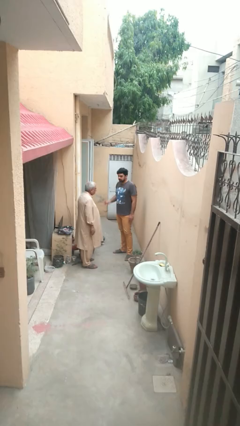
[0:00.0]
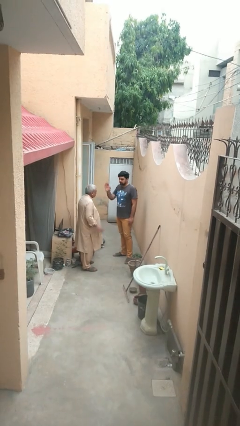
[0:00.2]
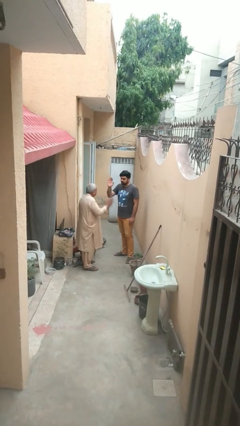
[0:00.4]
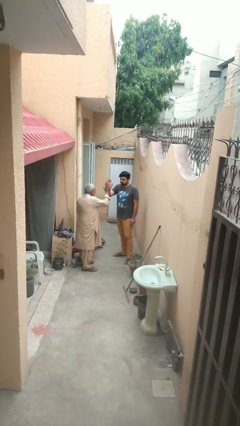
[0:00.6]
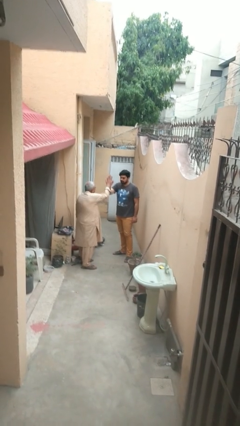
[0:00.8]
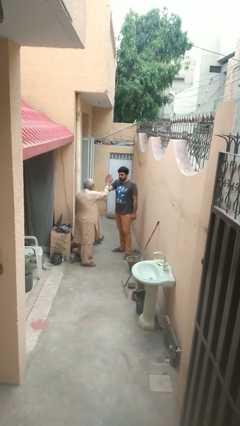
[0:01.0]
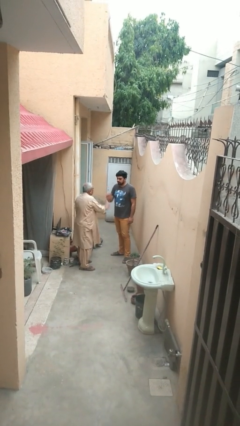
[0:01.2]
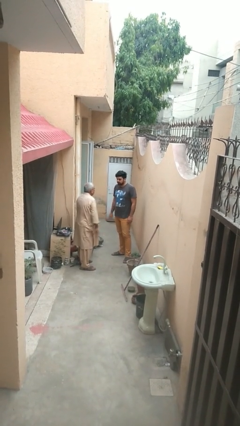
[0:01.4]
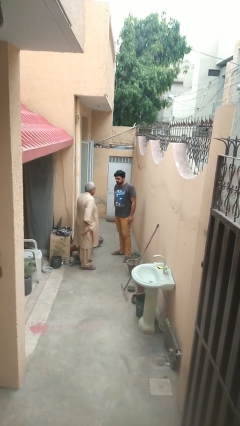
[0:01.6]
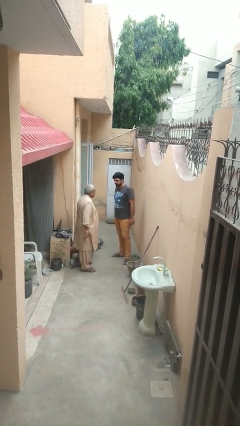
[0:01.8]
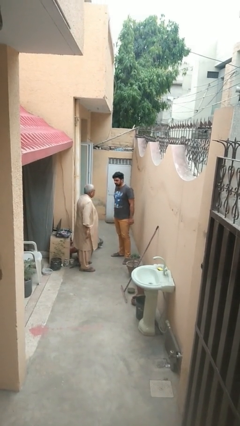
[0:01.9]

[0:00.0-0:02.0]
person highfives hand

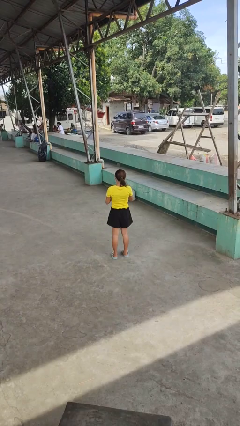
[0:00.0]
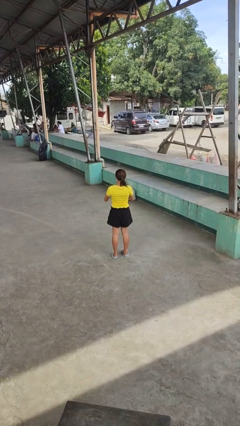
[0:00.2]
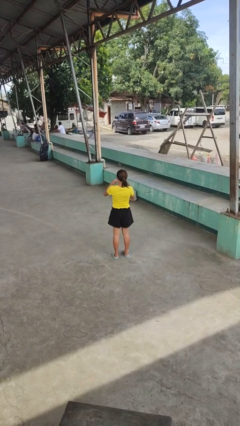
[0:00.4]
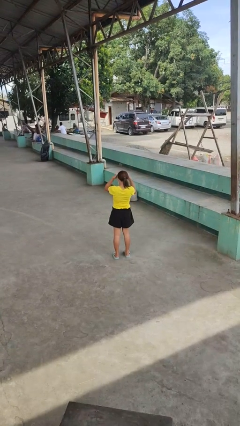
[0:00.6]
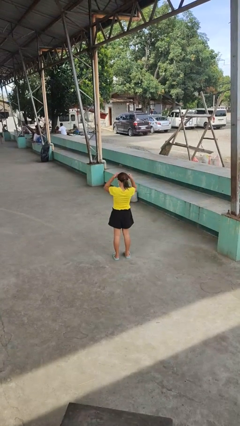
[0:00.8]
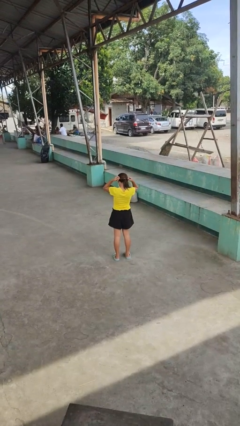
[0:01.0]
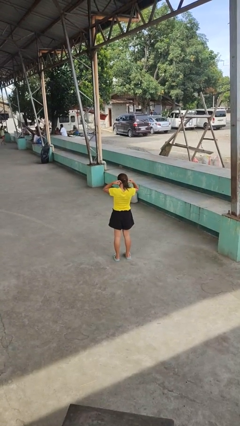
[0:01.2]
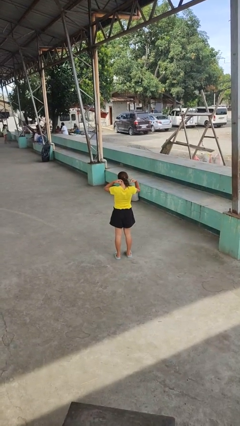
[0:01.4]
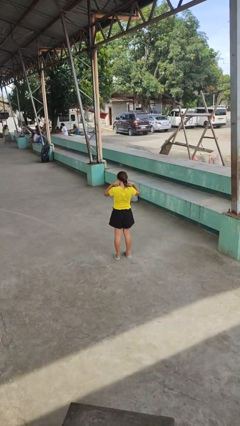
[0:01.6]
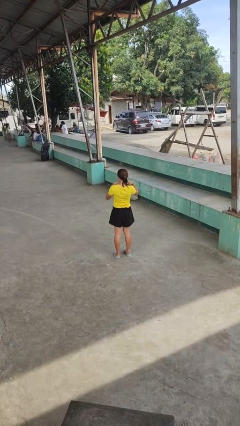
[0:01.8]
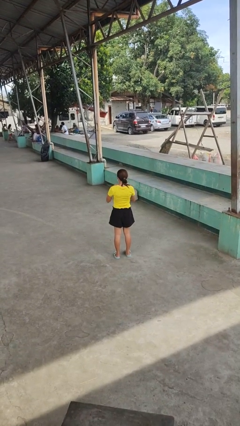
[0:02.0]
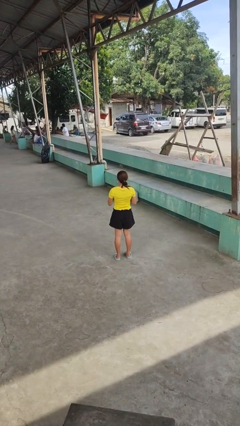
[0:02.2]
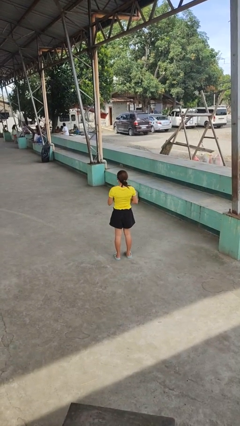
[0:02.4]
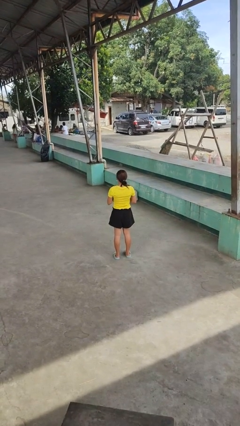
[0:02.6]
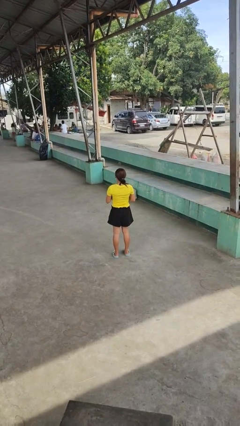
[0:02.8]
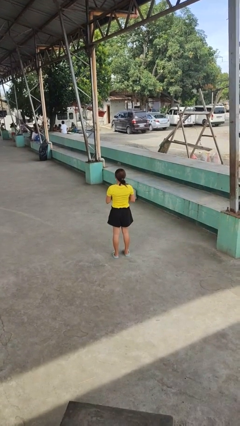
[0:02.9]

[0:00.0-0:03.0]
person puts on necklace

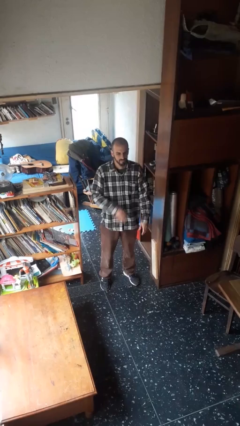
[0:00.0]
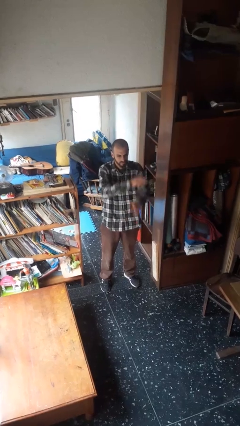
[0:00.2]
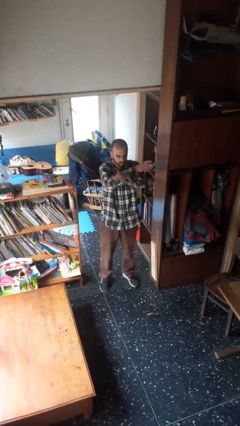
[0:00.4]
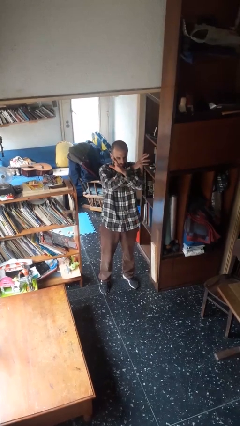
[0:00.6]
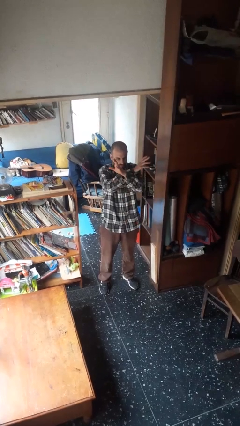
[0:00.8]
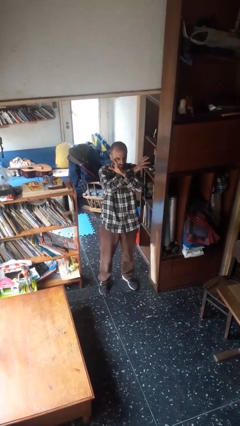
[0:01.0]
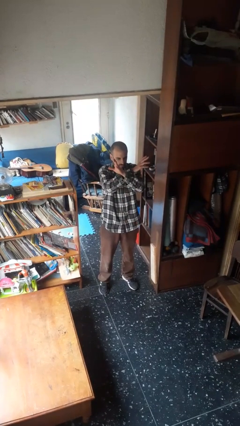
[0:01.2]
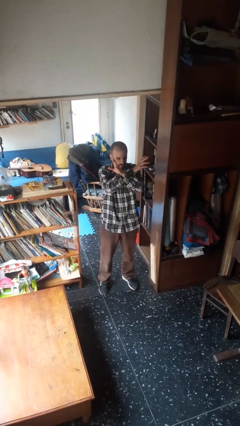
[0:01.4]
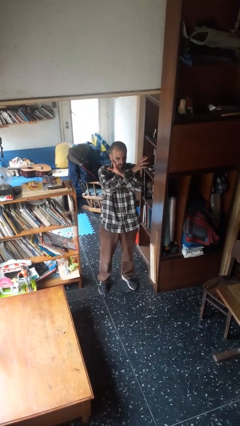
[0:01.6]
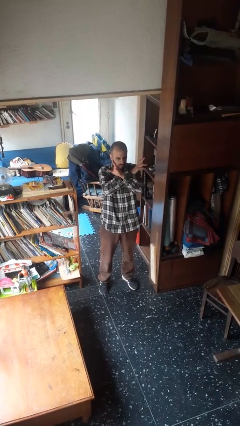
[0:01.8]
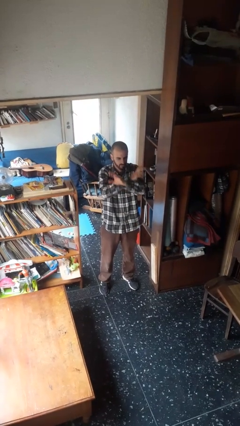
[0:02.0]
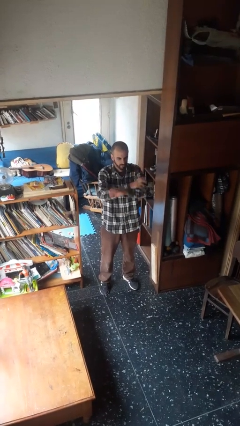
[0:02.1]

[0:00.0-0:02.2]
person gestures arms x

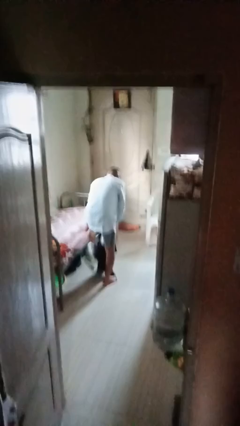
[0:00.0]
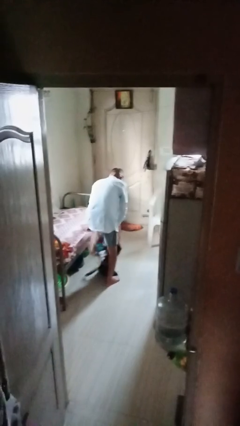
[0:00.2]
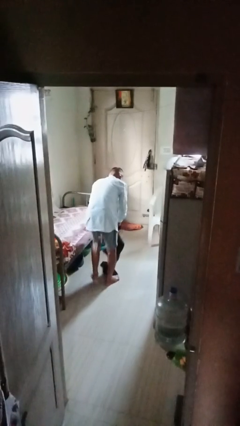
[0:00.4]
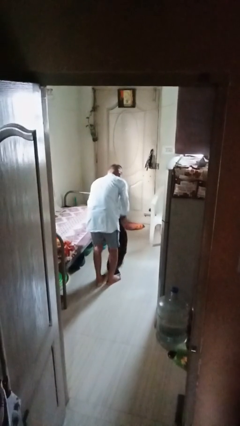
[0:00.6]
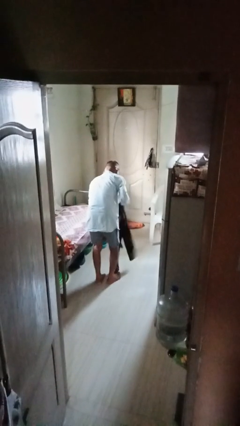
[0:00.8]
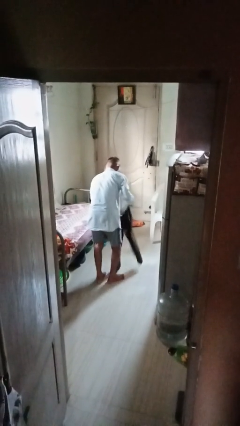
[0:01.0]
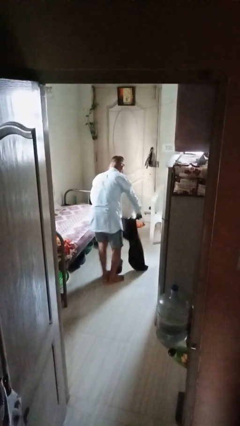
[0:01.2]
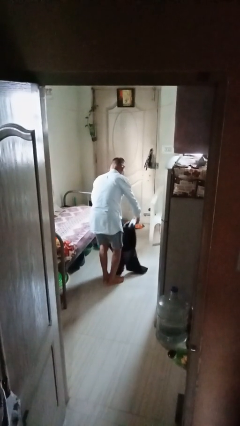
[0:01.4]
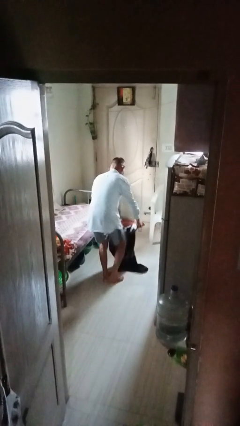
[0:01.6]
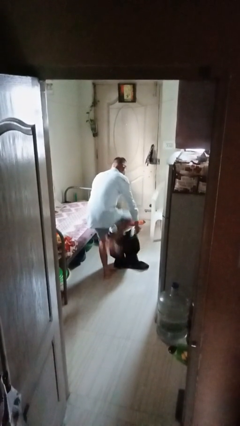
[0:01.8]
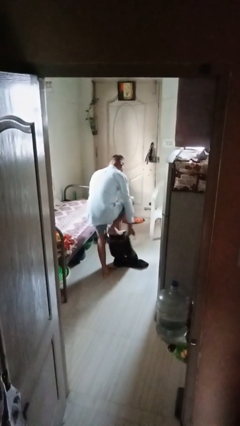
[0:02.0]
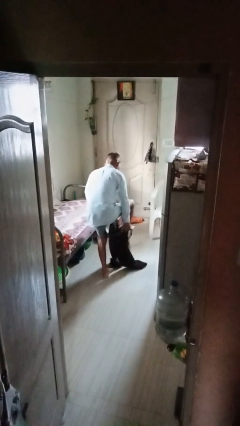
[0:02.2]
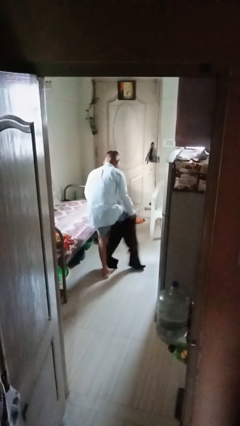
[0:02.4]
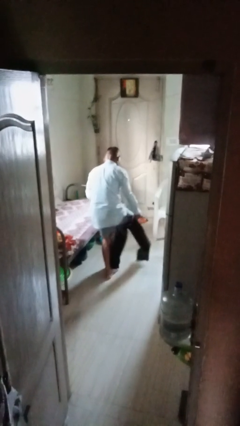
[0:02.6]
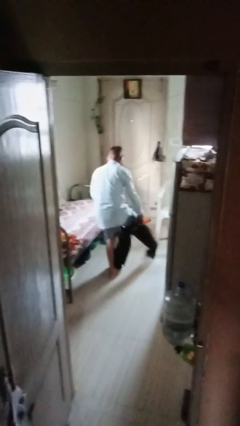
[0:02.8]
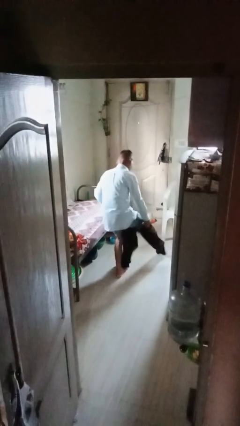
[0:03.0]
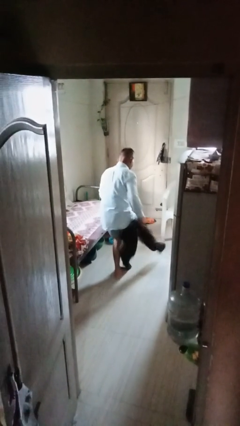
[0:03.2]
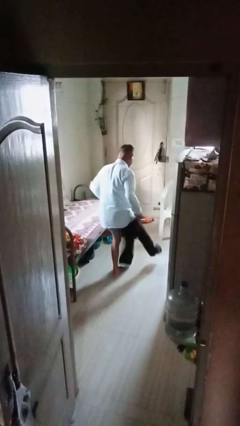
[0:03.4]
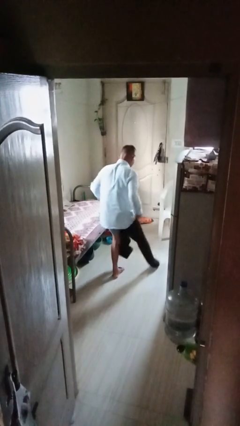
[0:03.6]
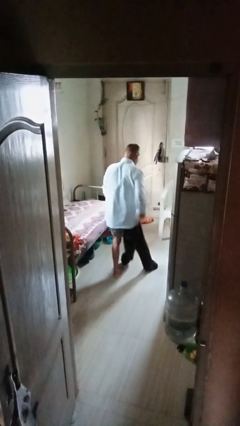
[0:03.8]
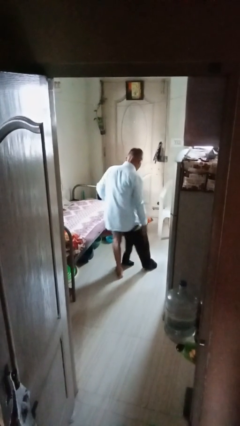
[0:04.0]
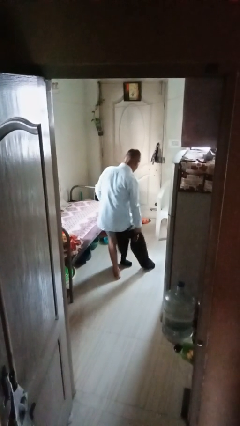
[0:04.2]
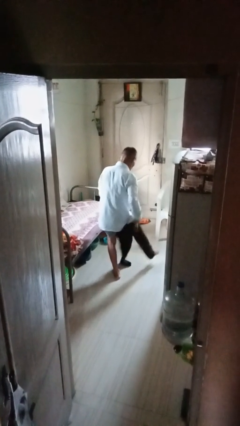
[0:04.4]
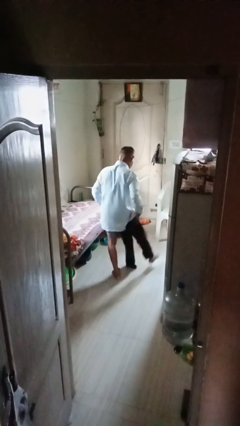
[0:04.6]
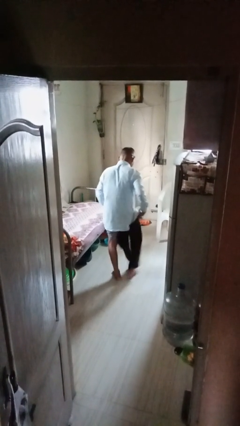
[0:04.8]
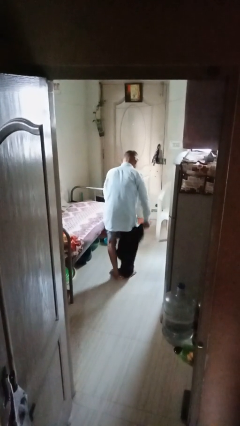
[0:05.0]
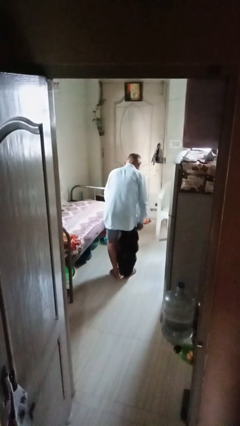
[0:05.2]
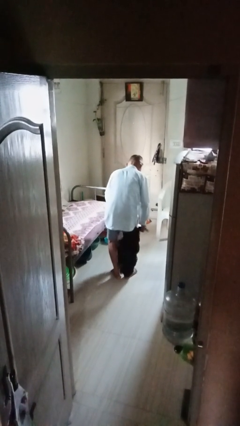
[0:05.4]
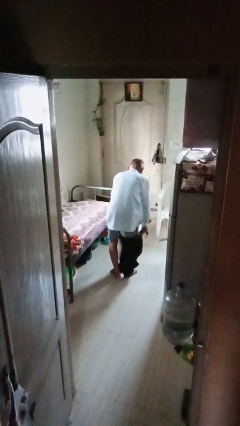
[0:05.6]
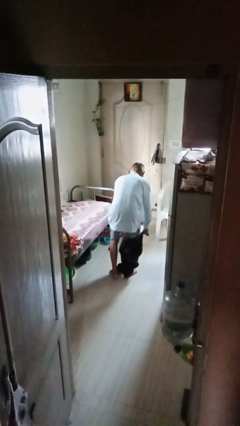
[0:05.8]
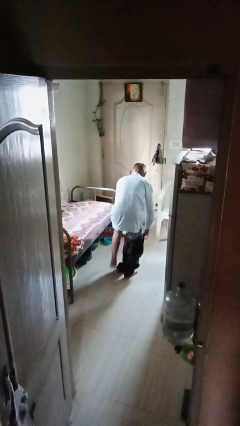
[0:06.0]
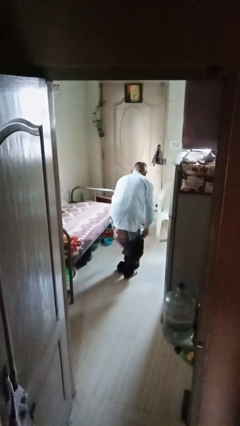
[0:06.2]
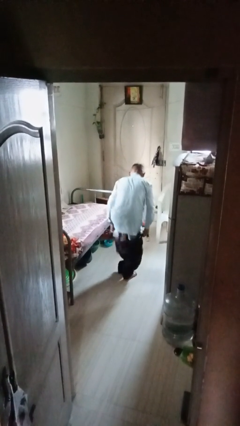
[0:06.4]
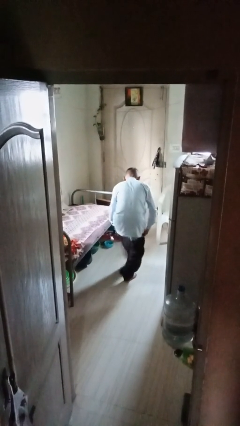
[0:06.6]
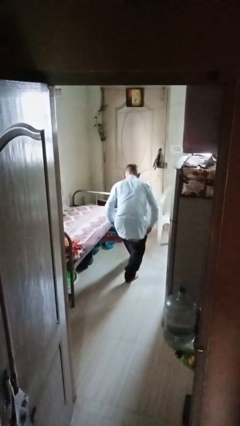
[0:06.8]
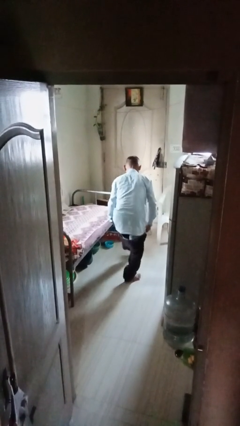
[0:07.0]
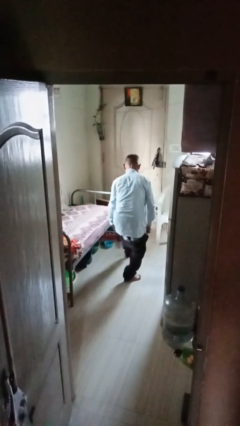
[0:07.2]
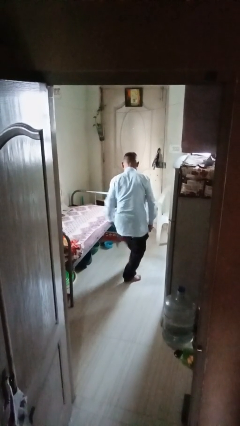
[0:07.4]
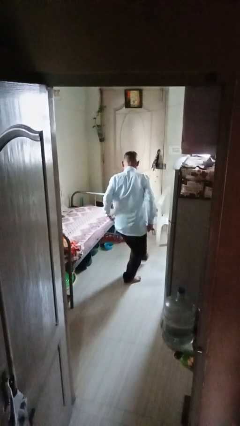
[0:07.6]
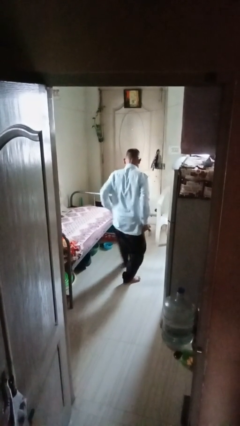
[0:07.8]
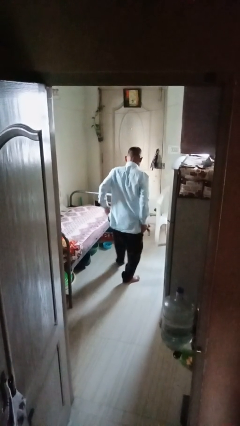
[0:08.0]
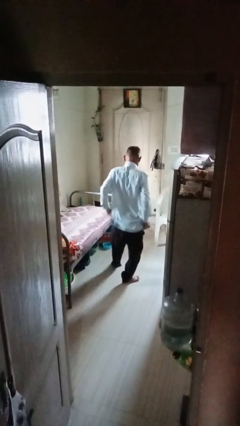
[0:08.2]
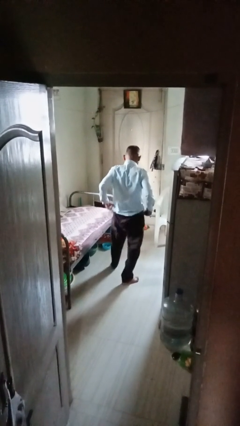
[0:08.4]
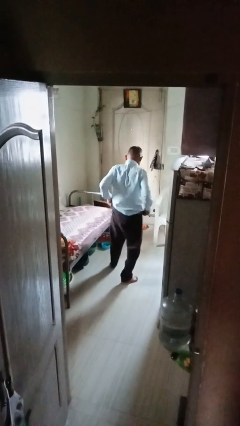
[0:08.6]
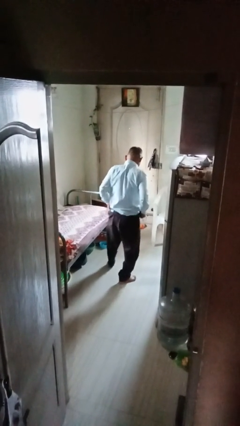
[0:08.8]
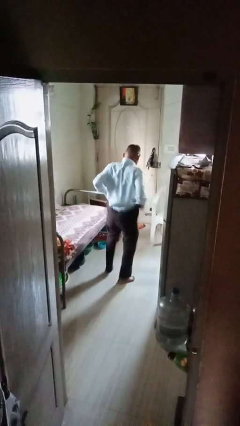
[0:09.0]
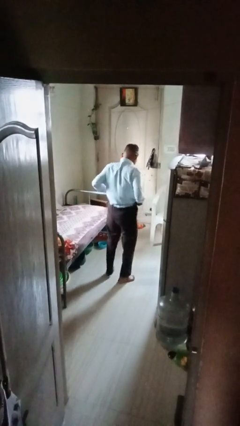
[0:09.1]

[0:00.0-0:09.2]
person puts on pants

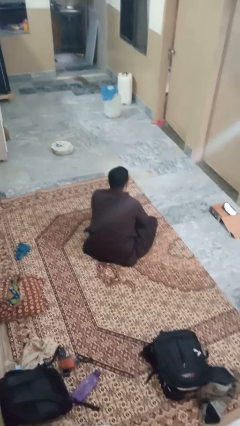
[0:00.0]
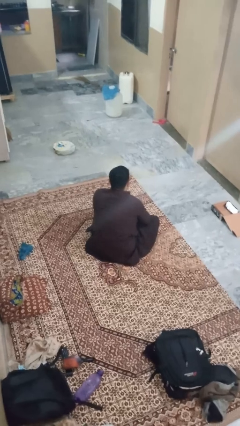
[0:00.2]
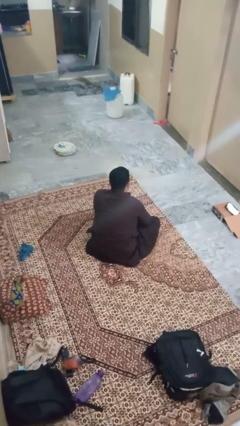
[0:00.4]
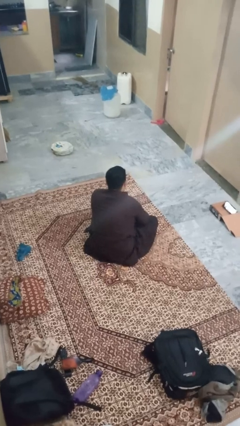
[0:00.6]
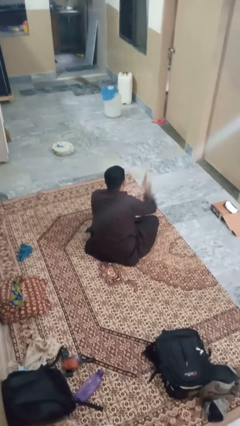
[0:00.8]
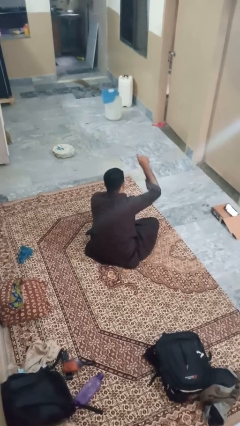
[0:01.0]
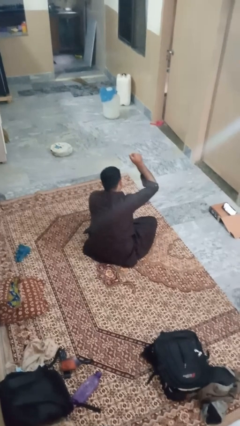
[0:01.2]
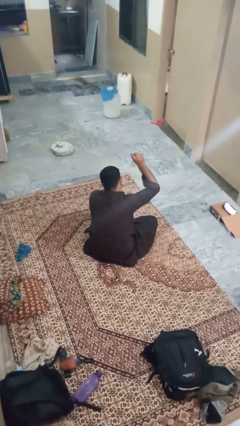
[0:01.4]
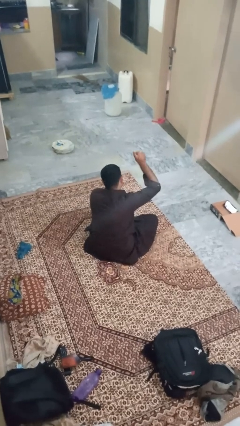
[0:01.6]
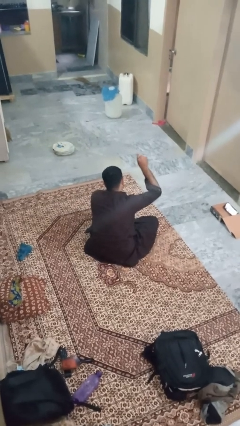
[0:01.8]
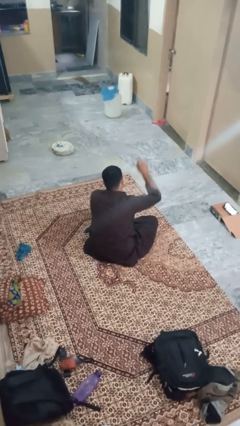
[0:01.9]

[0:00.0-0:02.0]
person gestures number one
